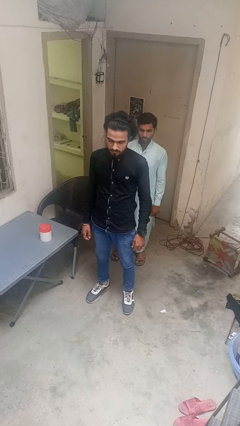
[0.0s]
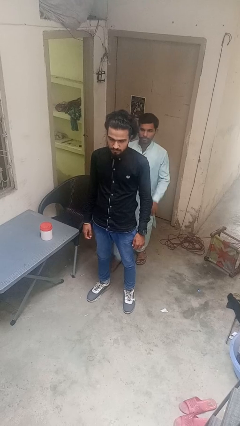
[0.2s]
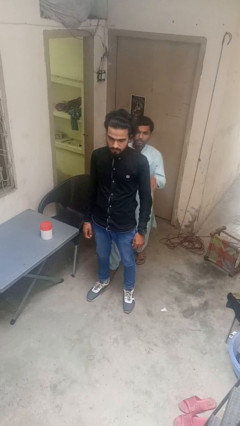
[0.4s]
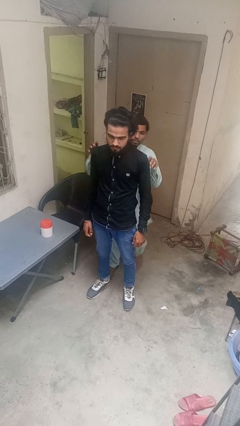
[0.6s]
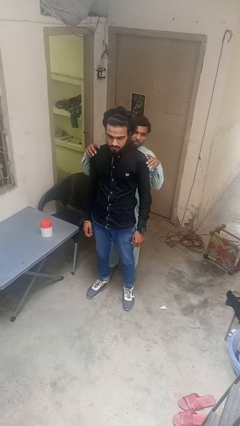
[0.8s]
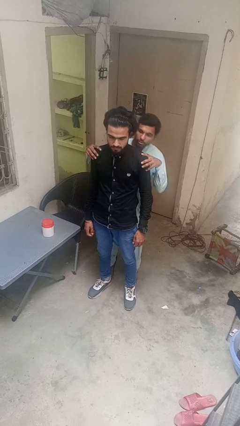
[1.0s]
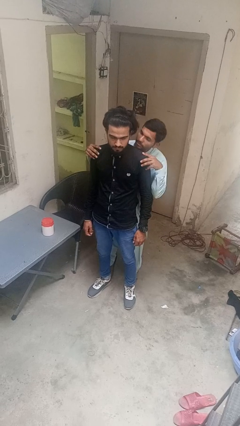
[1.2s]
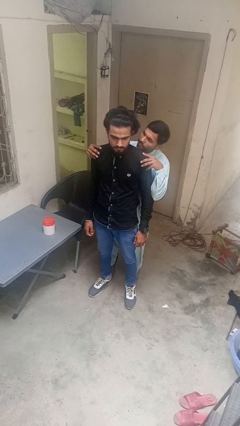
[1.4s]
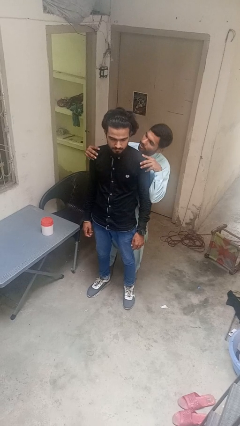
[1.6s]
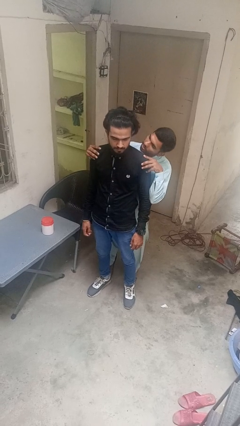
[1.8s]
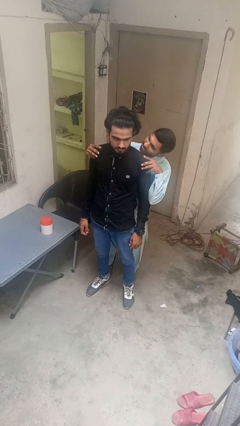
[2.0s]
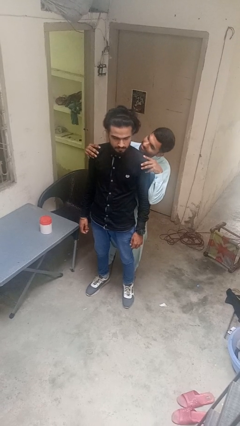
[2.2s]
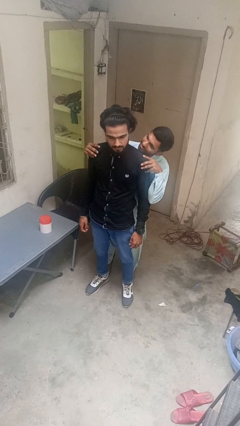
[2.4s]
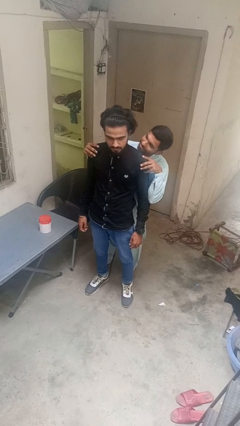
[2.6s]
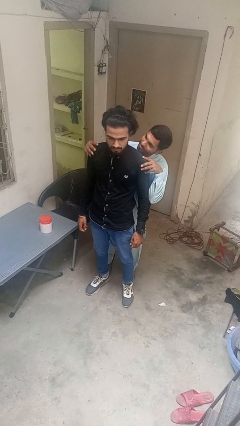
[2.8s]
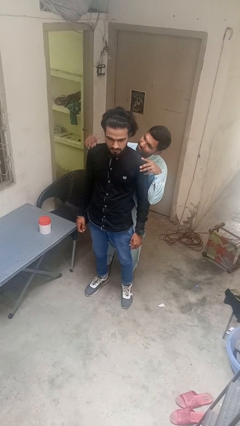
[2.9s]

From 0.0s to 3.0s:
person looks over shoulder

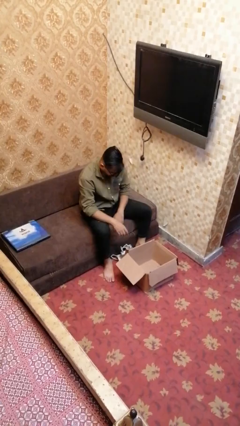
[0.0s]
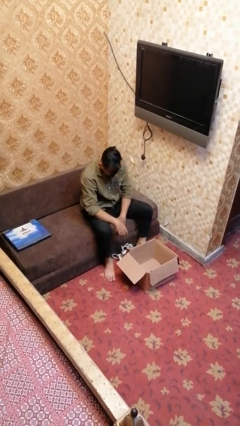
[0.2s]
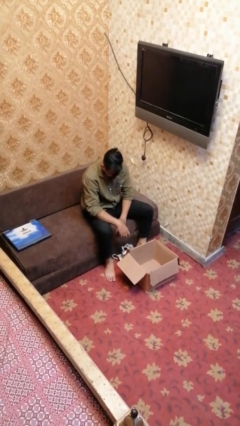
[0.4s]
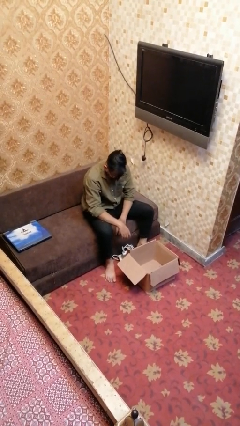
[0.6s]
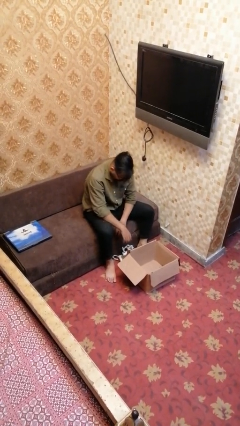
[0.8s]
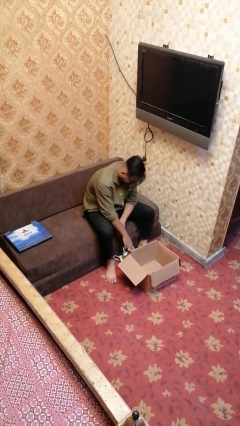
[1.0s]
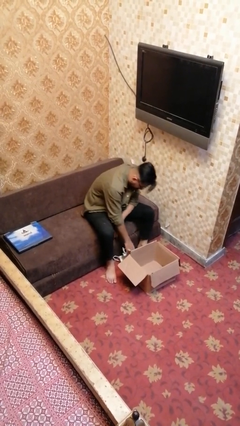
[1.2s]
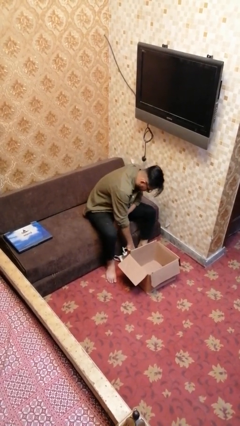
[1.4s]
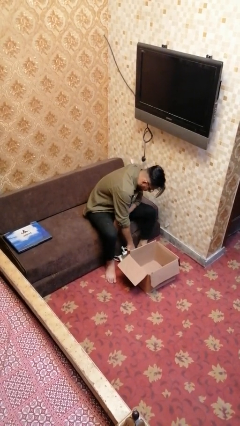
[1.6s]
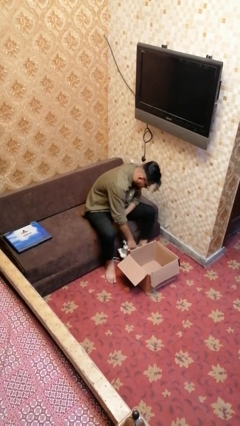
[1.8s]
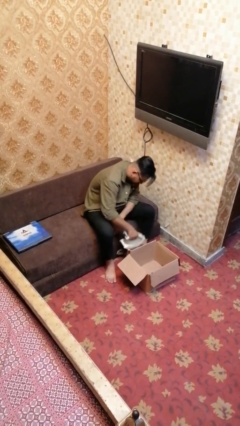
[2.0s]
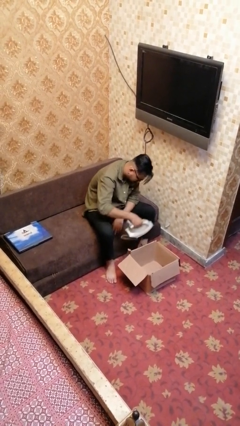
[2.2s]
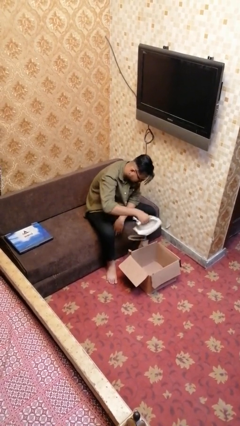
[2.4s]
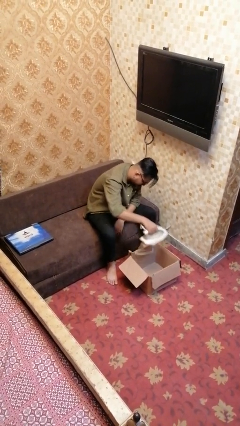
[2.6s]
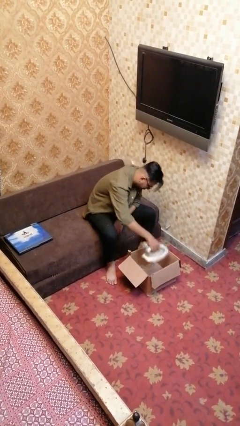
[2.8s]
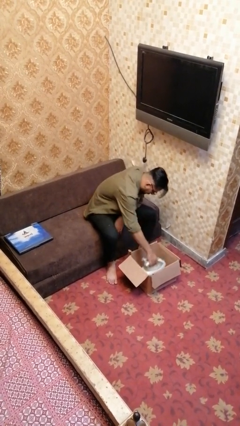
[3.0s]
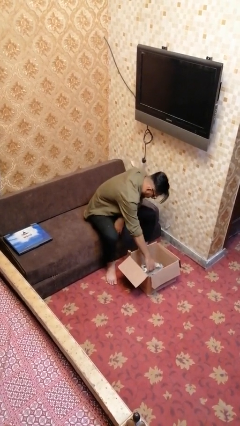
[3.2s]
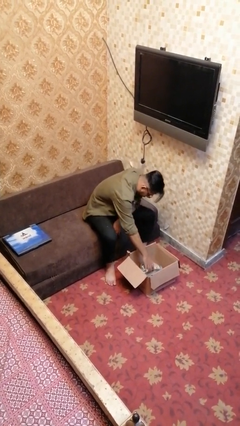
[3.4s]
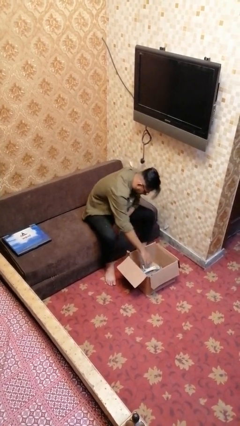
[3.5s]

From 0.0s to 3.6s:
person puts object into box

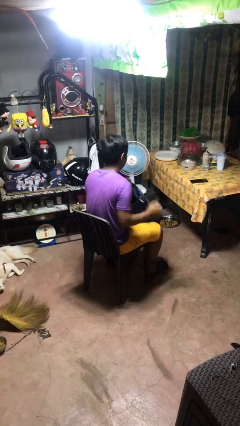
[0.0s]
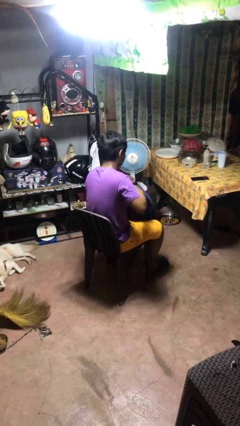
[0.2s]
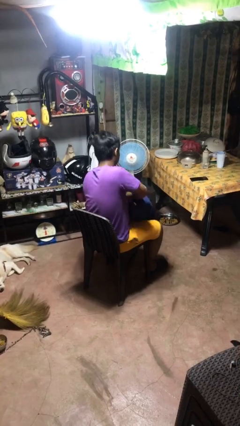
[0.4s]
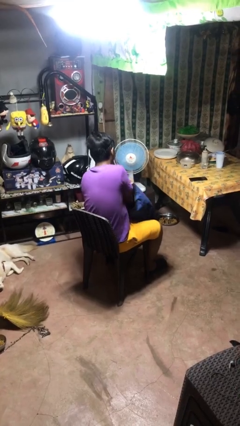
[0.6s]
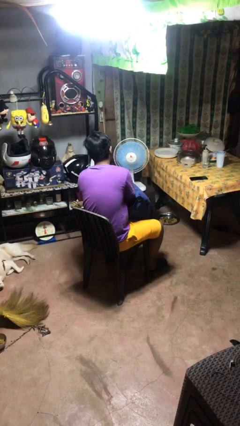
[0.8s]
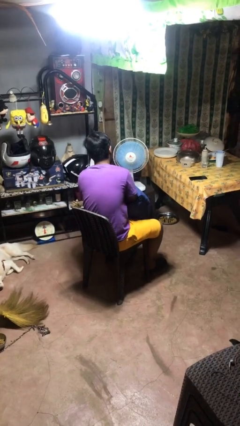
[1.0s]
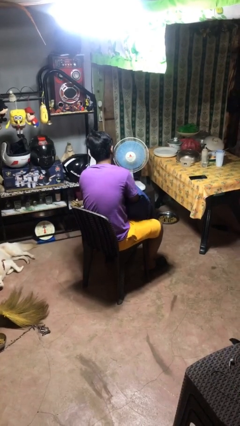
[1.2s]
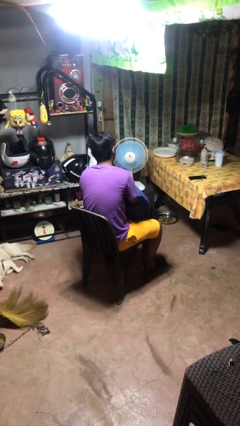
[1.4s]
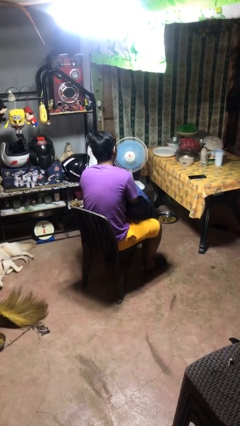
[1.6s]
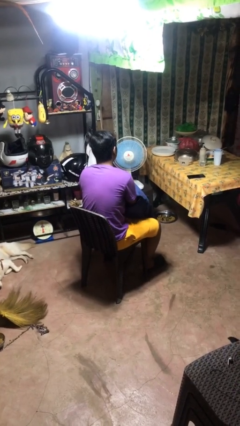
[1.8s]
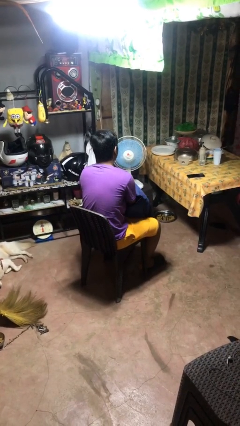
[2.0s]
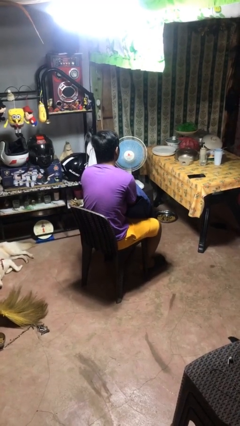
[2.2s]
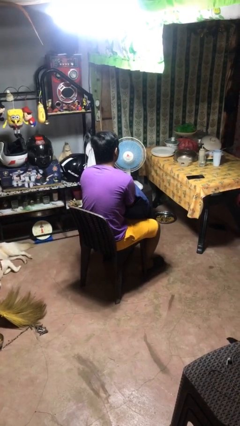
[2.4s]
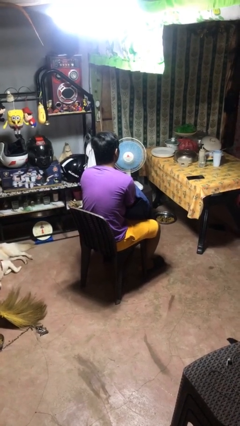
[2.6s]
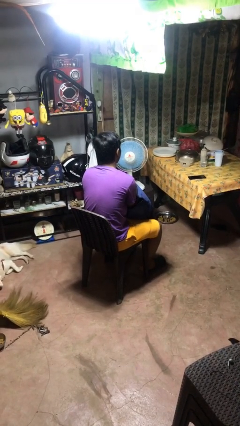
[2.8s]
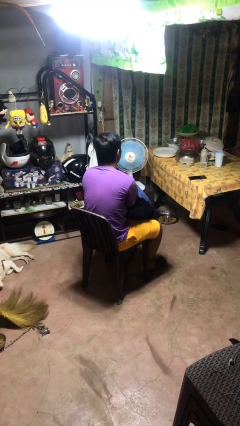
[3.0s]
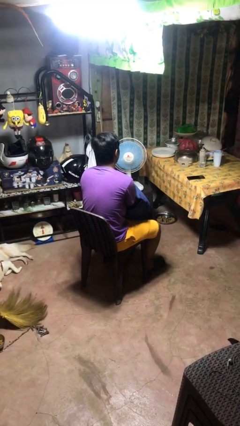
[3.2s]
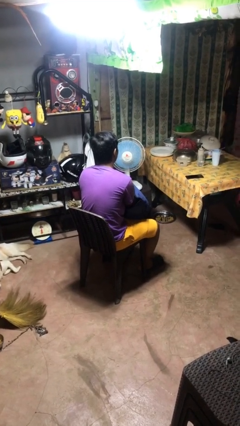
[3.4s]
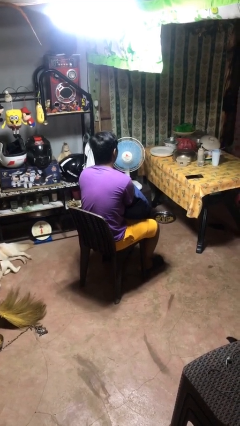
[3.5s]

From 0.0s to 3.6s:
person searches in backpack

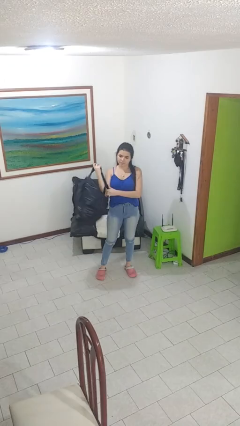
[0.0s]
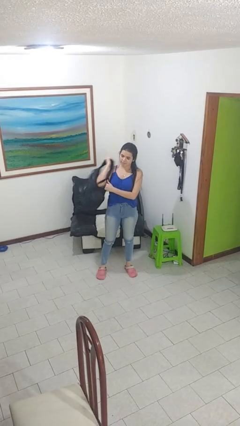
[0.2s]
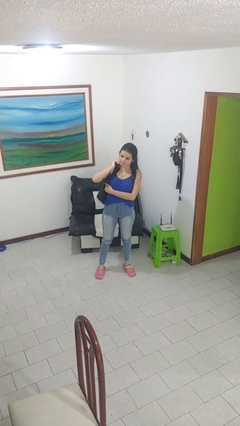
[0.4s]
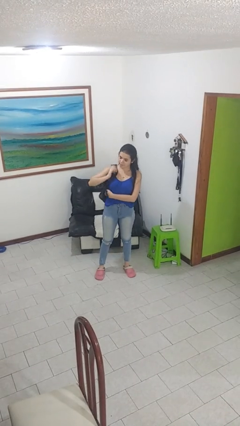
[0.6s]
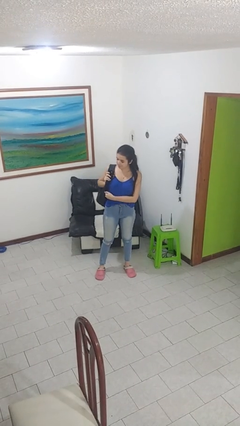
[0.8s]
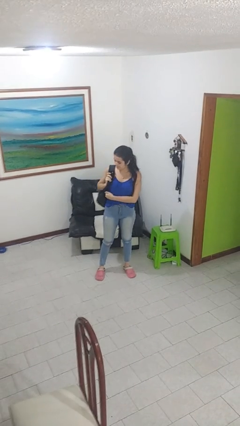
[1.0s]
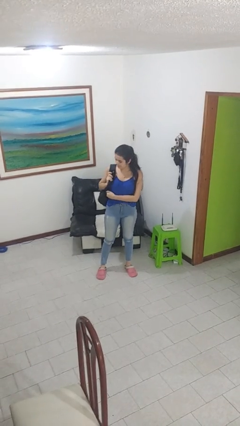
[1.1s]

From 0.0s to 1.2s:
person puts on backpack

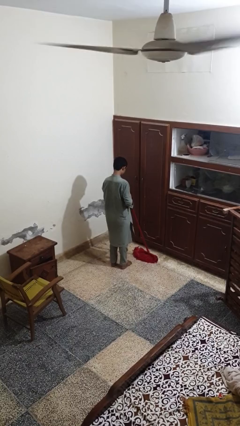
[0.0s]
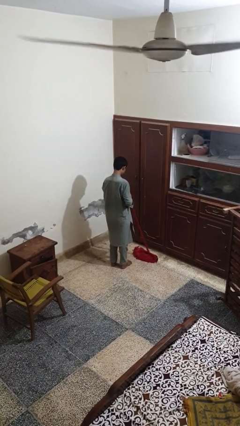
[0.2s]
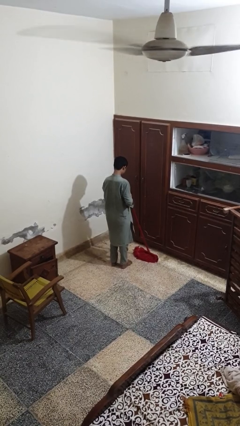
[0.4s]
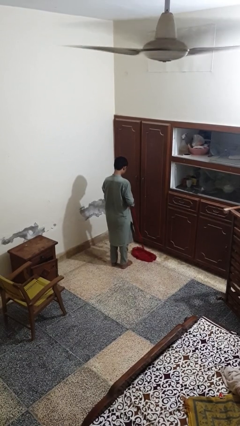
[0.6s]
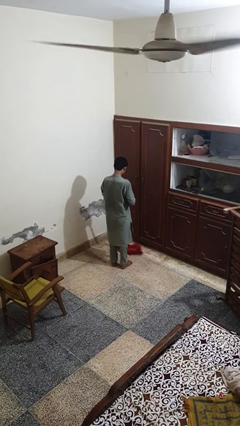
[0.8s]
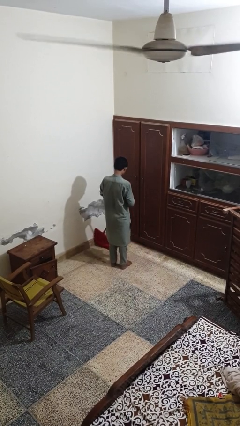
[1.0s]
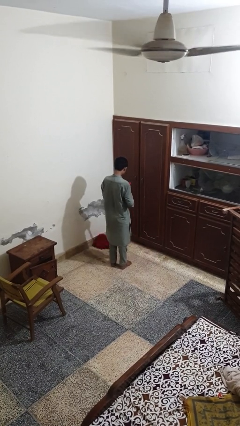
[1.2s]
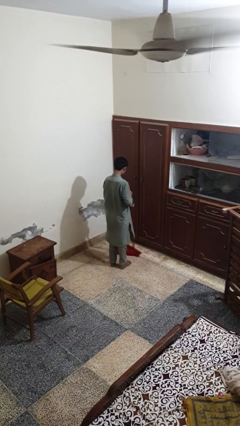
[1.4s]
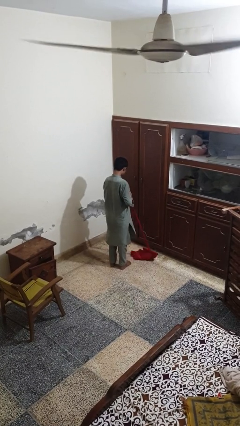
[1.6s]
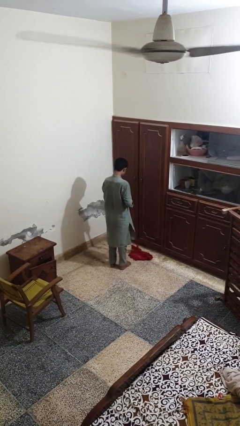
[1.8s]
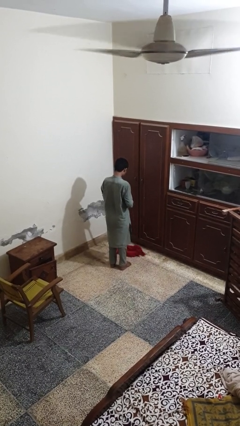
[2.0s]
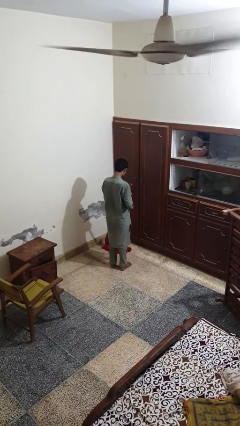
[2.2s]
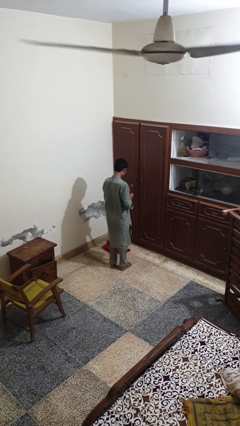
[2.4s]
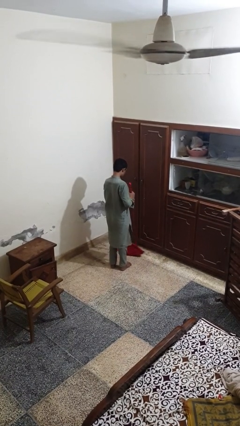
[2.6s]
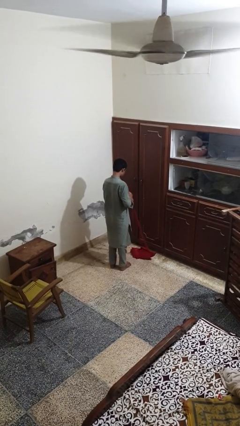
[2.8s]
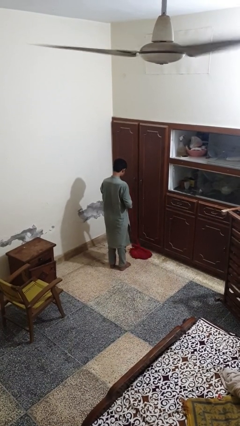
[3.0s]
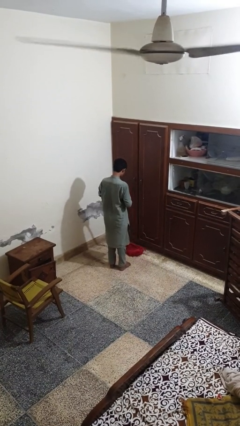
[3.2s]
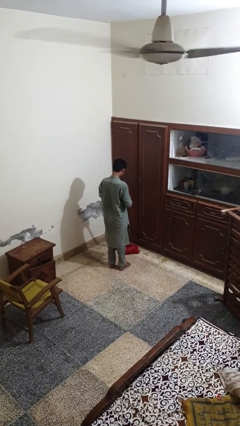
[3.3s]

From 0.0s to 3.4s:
person mops

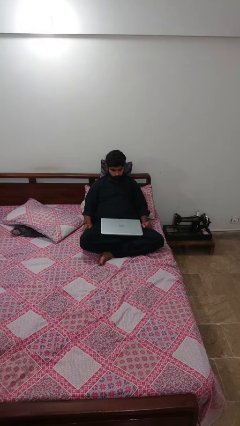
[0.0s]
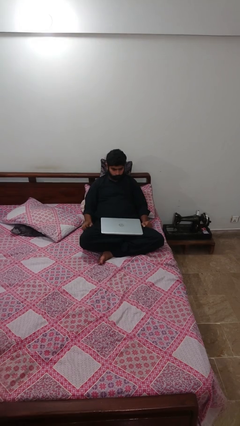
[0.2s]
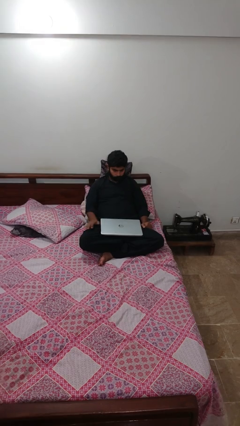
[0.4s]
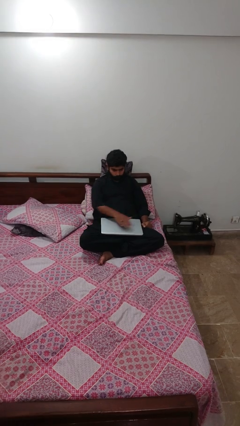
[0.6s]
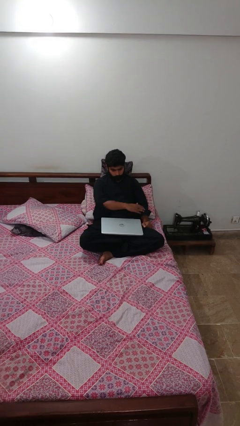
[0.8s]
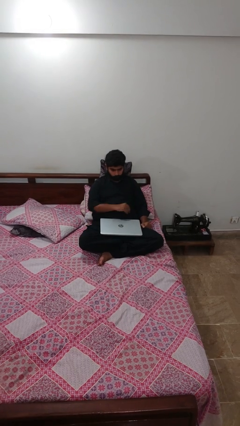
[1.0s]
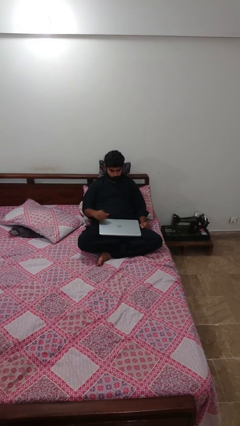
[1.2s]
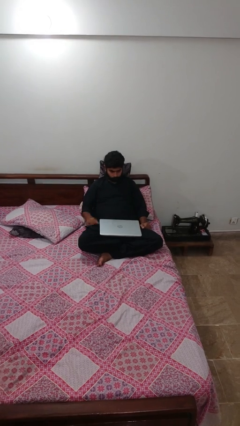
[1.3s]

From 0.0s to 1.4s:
person waves hand over object

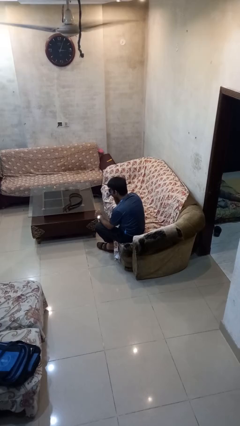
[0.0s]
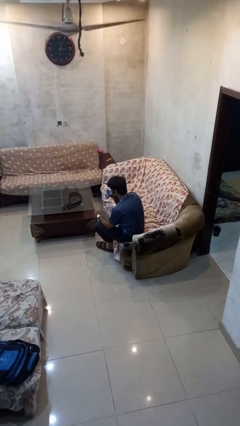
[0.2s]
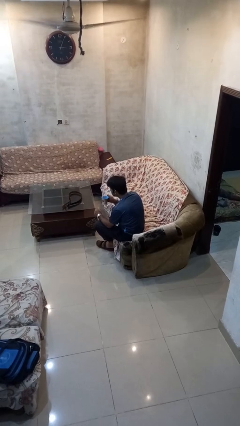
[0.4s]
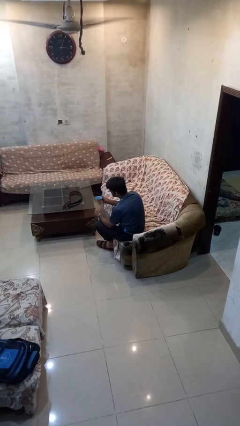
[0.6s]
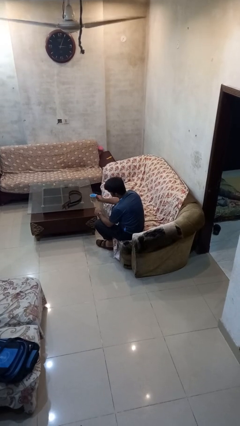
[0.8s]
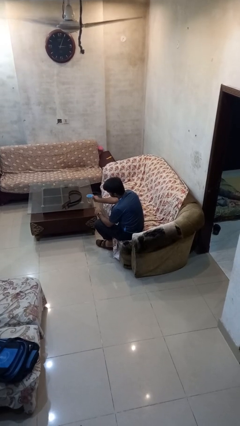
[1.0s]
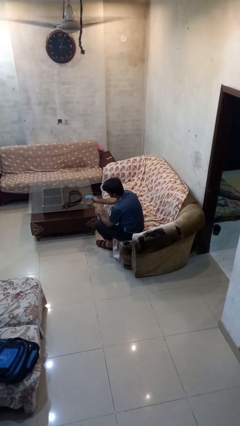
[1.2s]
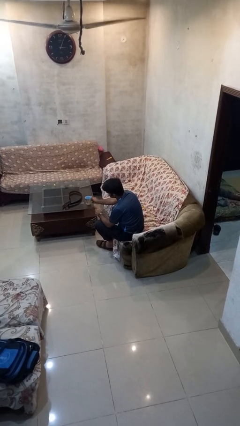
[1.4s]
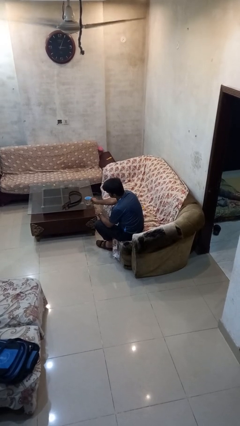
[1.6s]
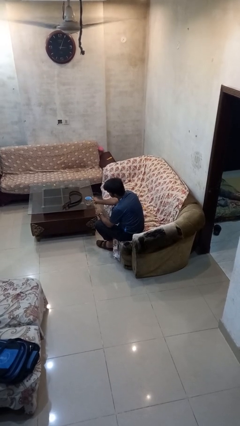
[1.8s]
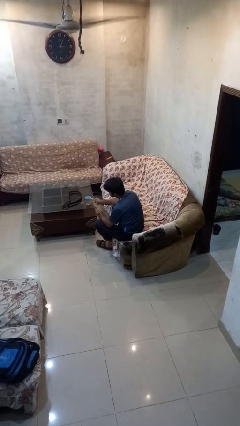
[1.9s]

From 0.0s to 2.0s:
person puts down object on table
